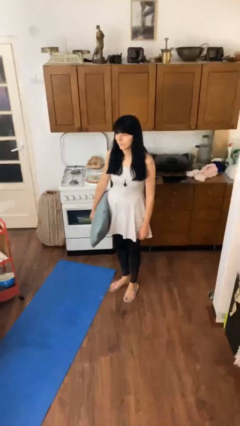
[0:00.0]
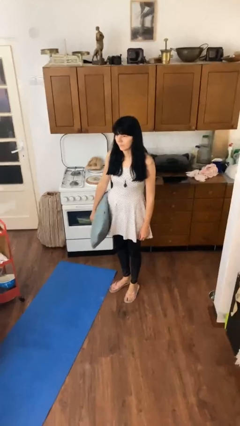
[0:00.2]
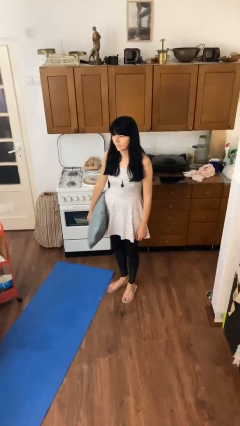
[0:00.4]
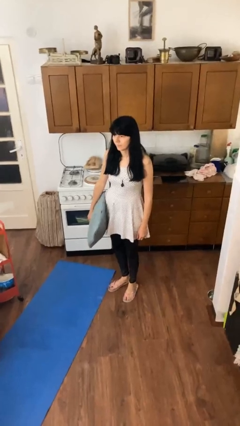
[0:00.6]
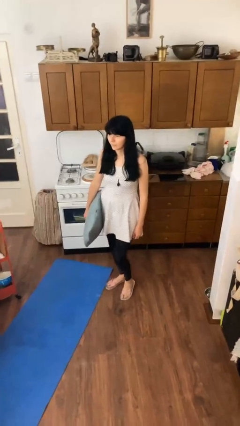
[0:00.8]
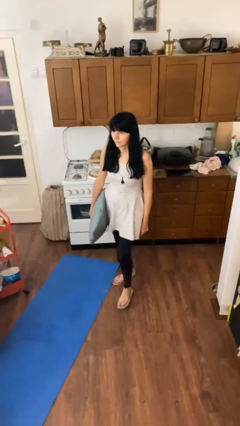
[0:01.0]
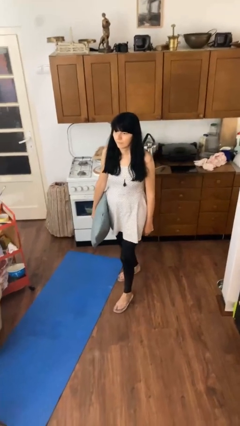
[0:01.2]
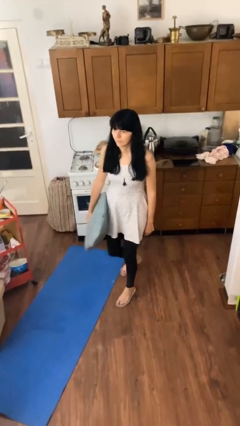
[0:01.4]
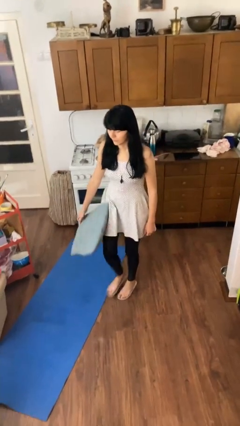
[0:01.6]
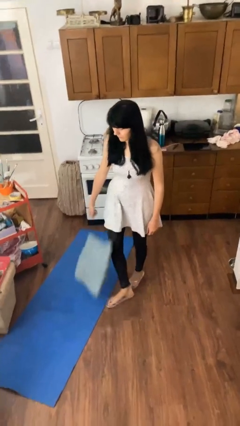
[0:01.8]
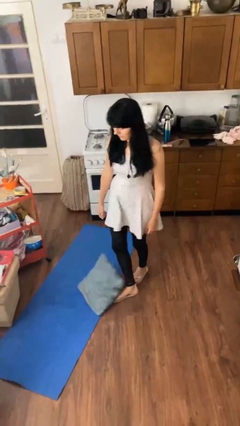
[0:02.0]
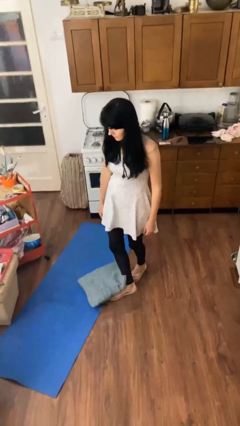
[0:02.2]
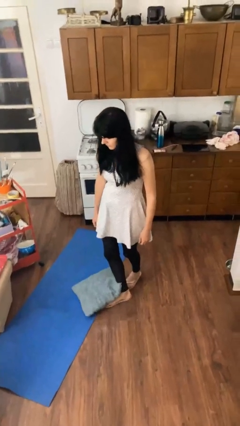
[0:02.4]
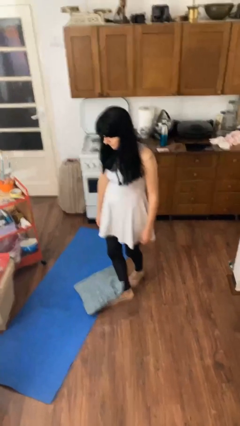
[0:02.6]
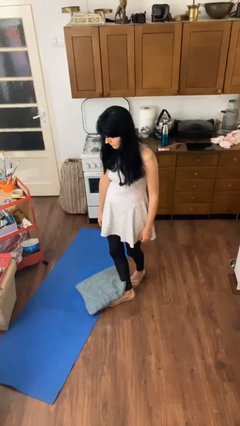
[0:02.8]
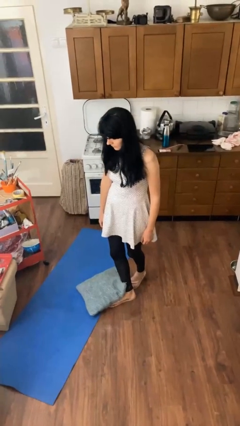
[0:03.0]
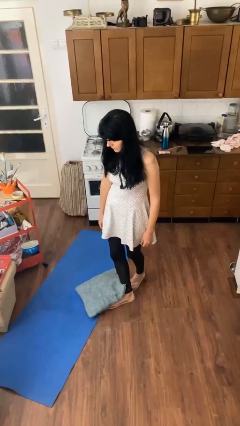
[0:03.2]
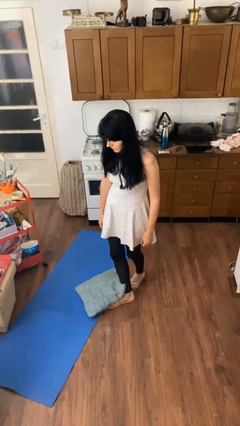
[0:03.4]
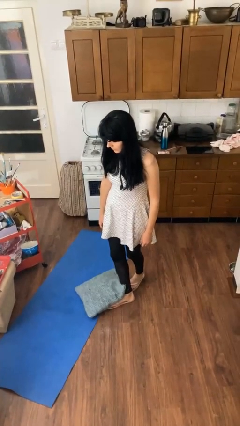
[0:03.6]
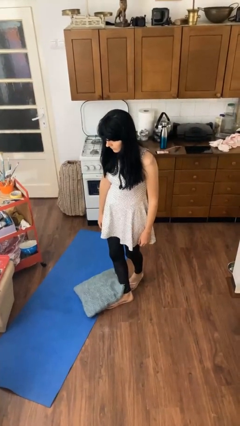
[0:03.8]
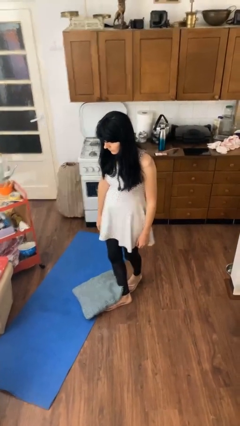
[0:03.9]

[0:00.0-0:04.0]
person drops object

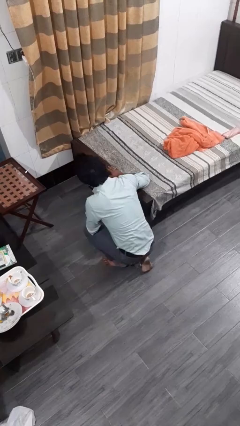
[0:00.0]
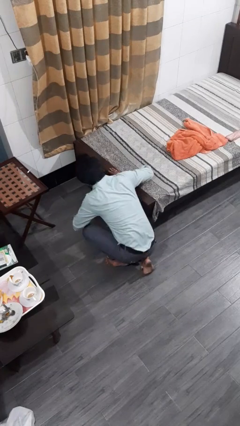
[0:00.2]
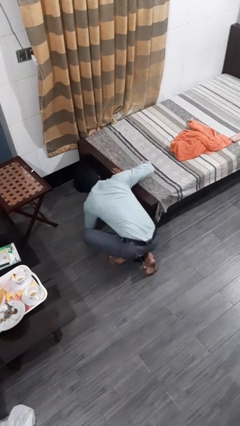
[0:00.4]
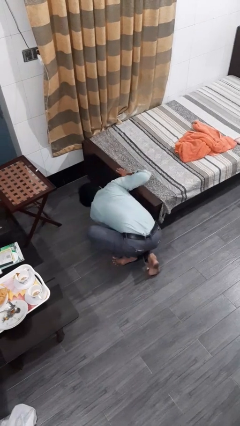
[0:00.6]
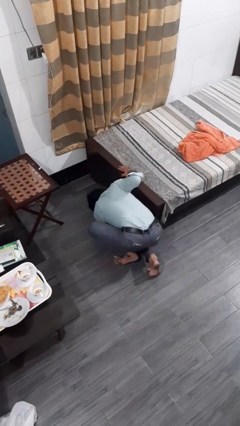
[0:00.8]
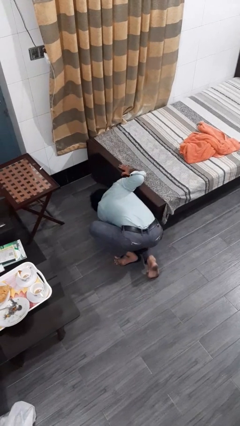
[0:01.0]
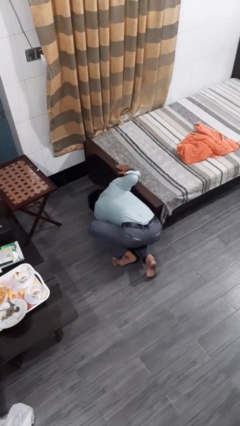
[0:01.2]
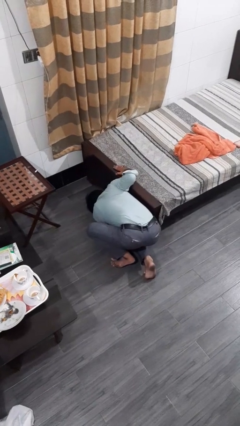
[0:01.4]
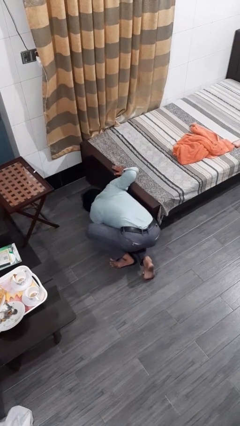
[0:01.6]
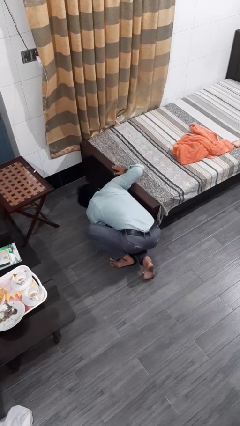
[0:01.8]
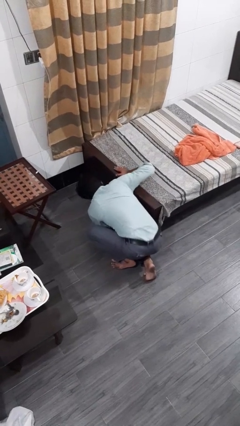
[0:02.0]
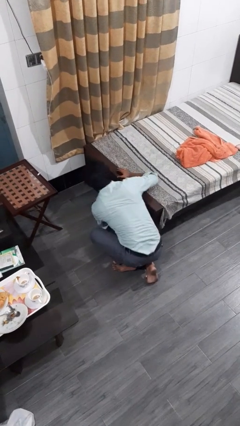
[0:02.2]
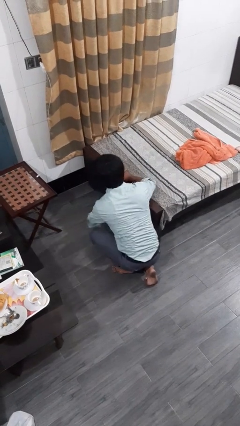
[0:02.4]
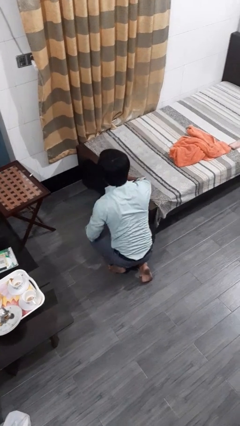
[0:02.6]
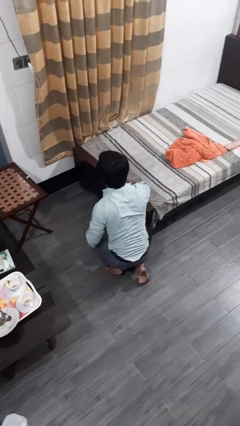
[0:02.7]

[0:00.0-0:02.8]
person searches under bed

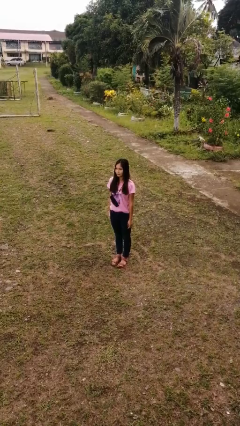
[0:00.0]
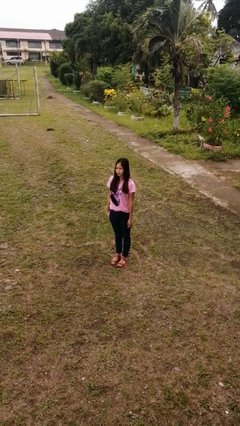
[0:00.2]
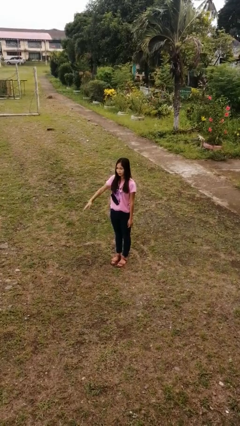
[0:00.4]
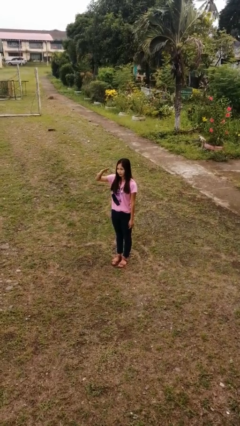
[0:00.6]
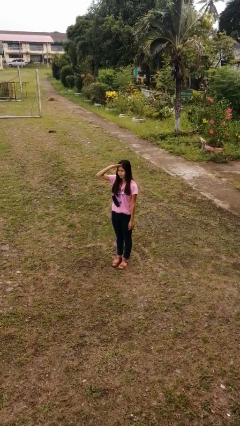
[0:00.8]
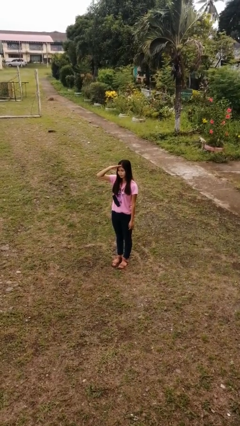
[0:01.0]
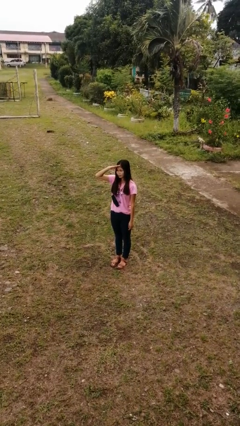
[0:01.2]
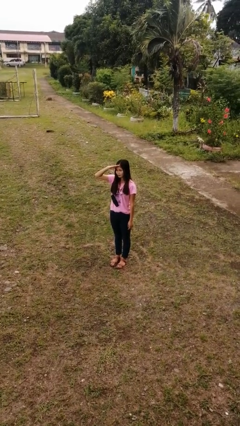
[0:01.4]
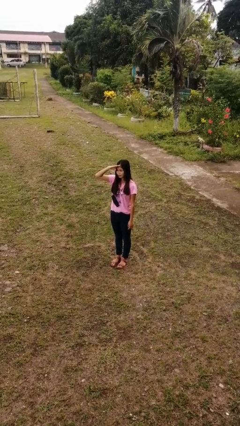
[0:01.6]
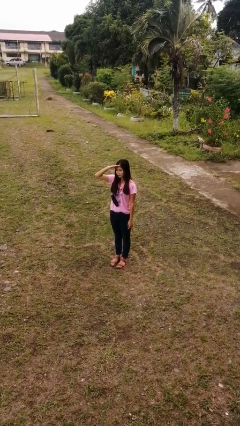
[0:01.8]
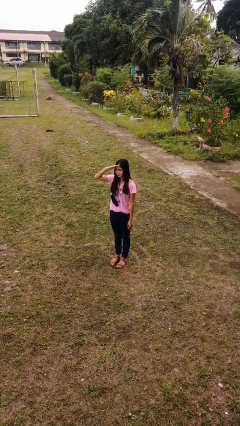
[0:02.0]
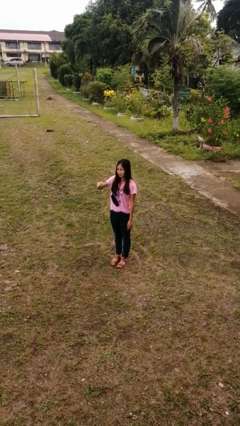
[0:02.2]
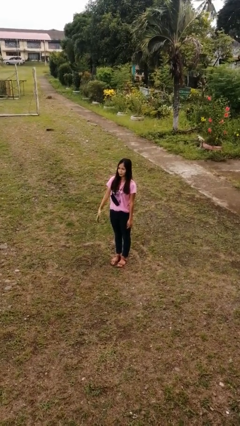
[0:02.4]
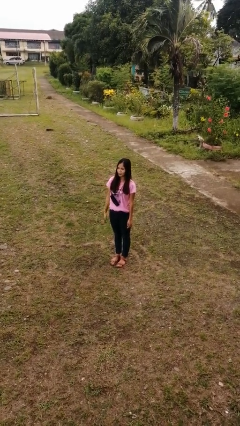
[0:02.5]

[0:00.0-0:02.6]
person salutes

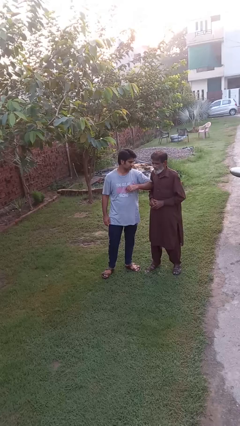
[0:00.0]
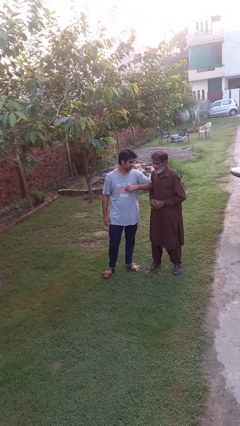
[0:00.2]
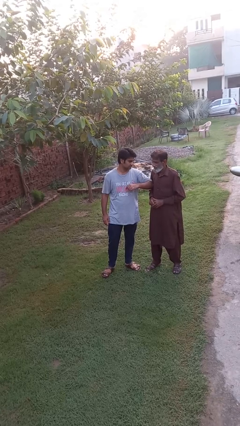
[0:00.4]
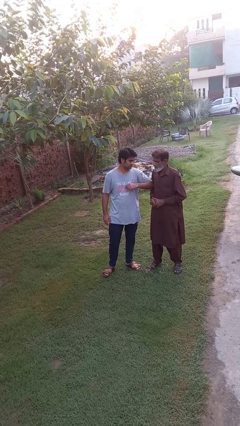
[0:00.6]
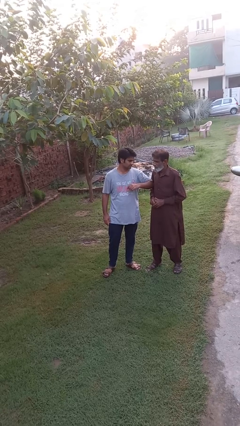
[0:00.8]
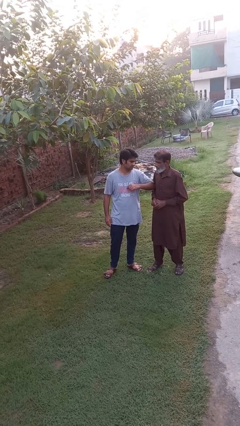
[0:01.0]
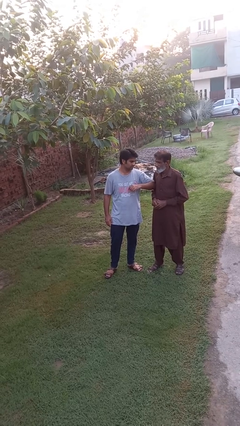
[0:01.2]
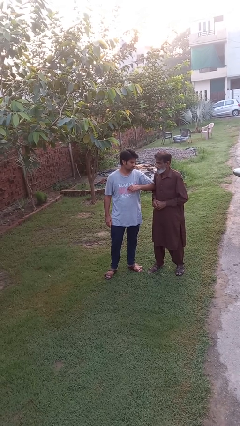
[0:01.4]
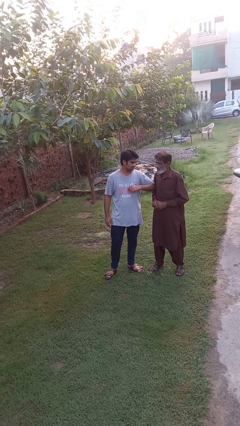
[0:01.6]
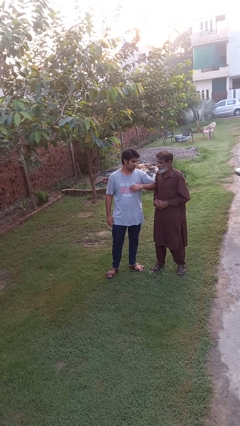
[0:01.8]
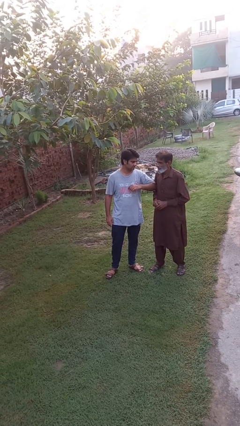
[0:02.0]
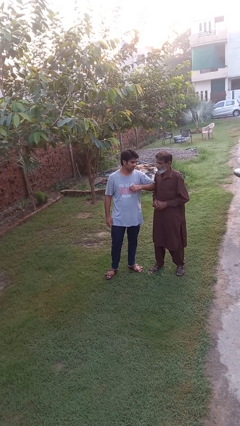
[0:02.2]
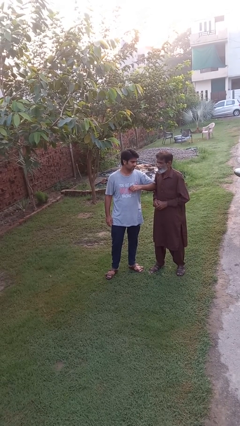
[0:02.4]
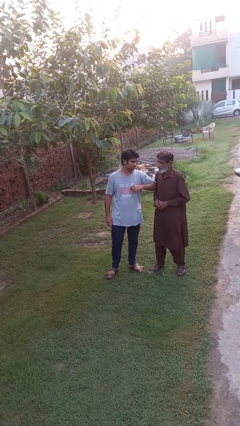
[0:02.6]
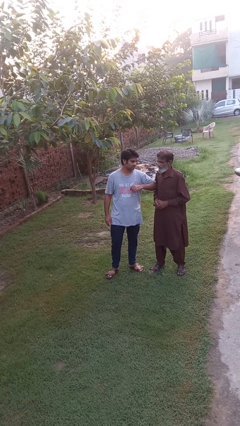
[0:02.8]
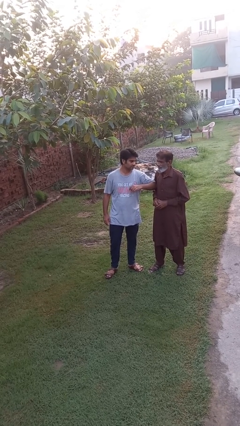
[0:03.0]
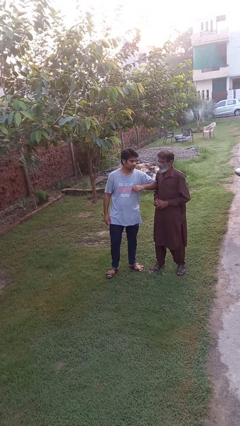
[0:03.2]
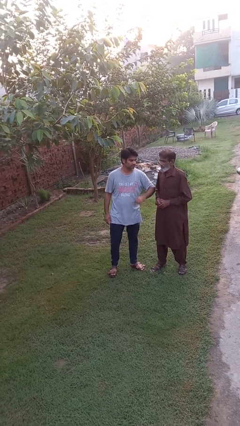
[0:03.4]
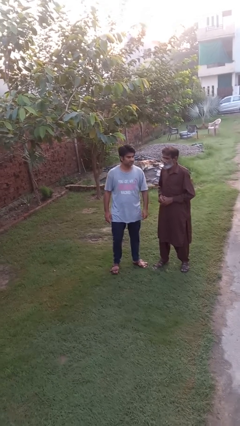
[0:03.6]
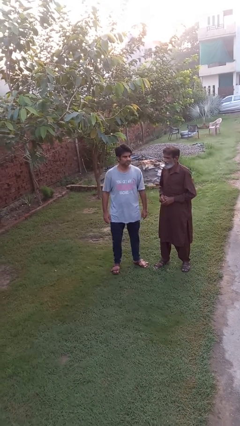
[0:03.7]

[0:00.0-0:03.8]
person nudges person with elbow

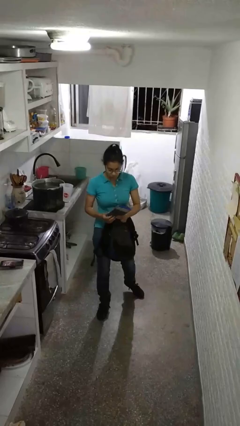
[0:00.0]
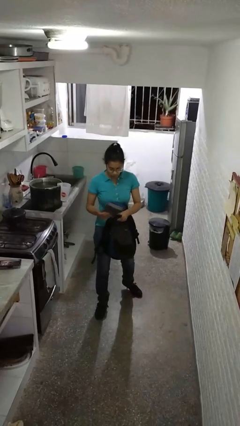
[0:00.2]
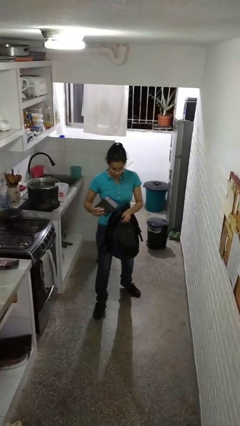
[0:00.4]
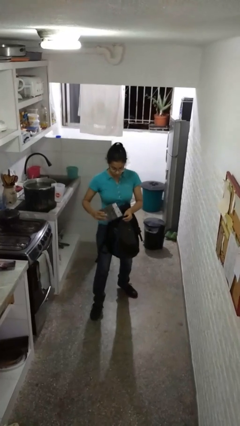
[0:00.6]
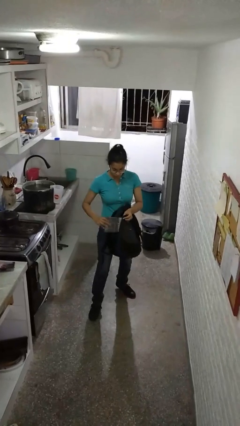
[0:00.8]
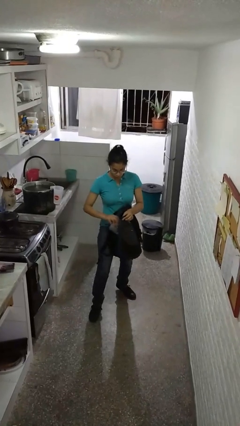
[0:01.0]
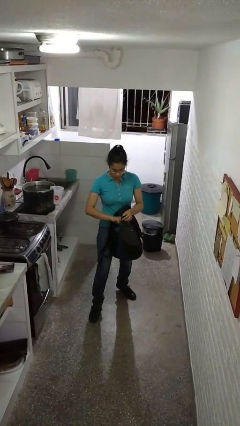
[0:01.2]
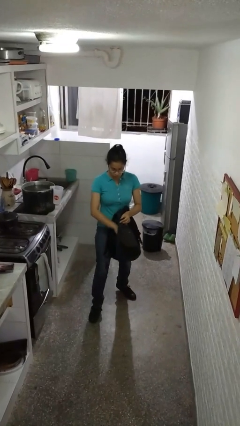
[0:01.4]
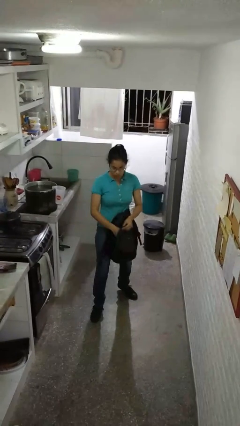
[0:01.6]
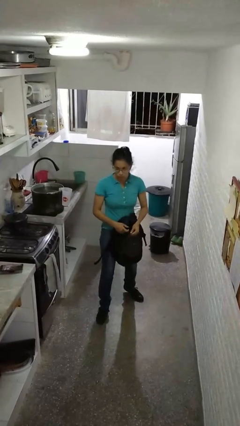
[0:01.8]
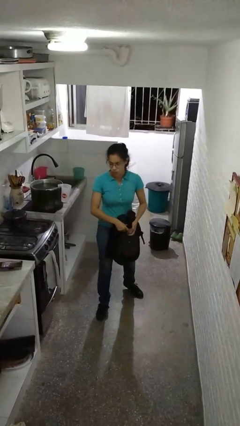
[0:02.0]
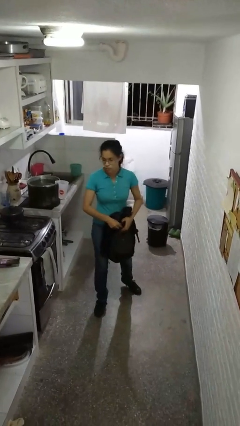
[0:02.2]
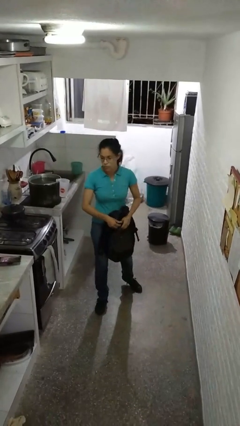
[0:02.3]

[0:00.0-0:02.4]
person puts object into backpack

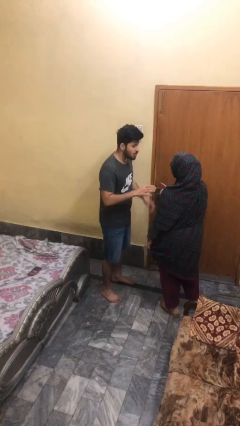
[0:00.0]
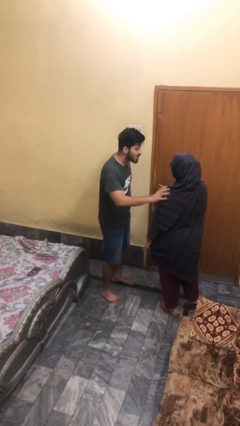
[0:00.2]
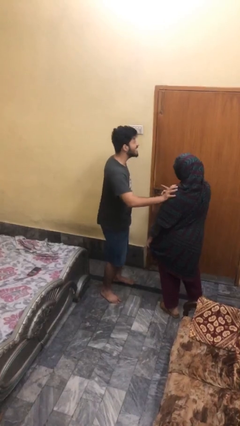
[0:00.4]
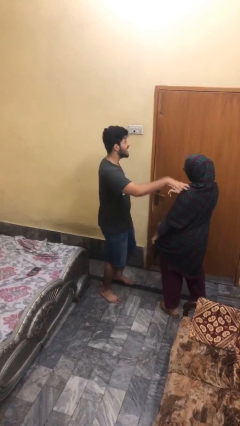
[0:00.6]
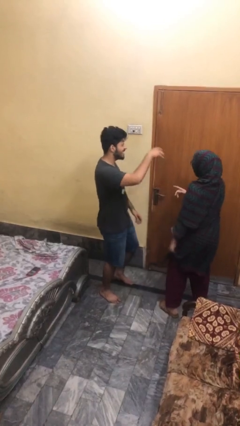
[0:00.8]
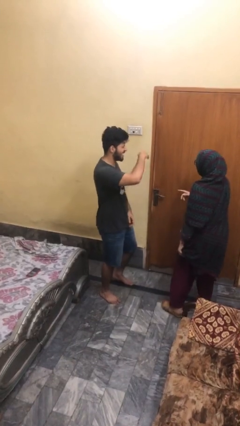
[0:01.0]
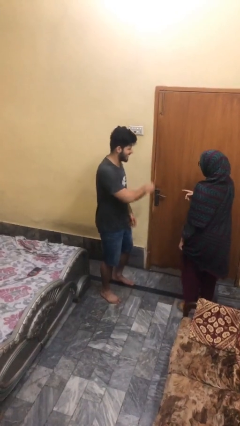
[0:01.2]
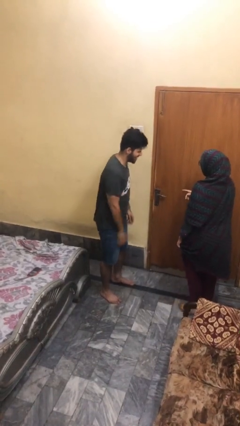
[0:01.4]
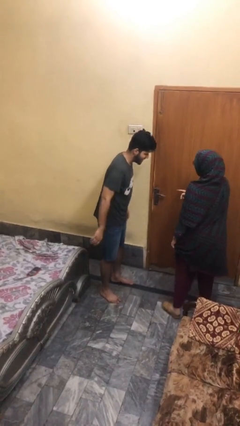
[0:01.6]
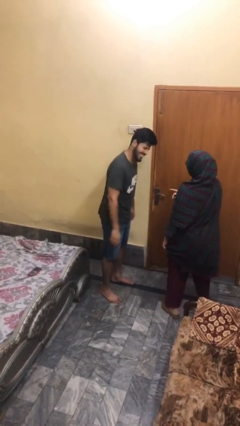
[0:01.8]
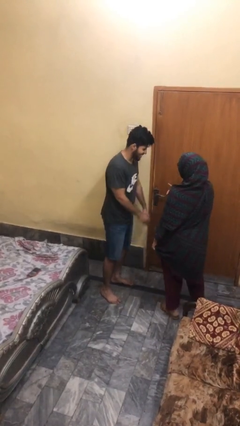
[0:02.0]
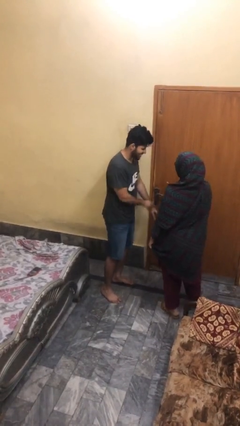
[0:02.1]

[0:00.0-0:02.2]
person shoves person
